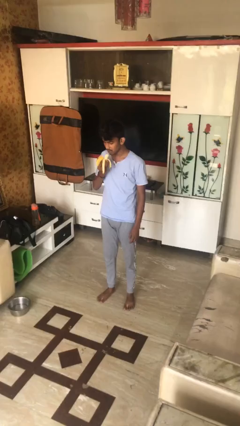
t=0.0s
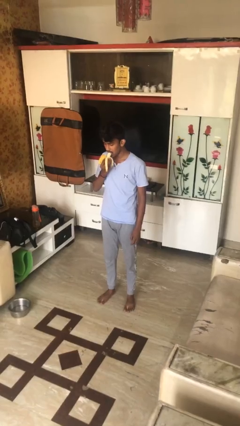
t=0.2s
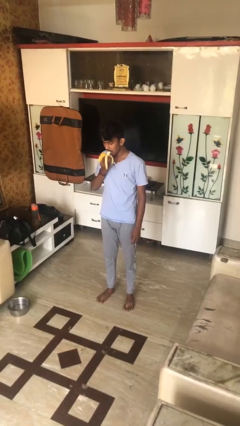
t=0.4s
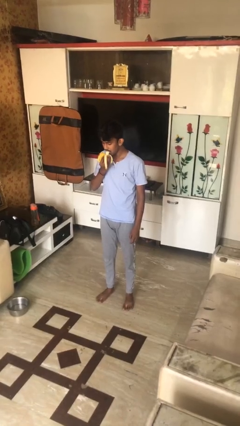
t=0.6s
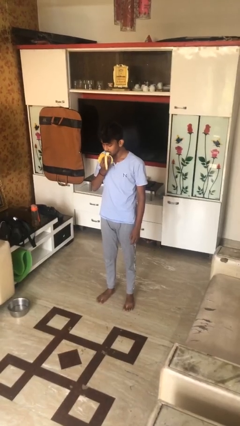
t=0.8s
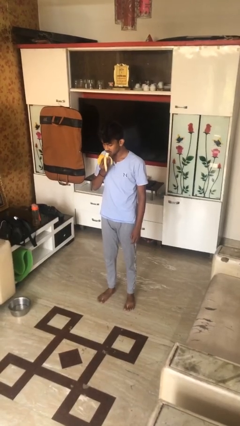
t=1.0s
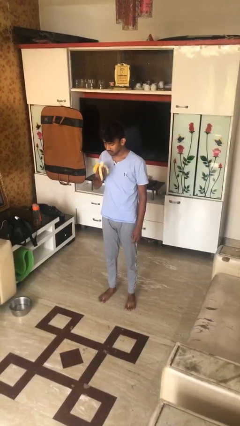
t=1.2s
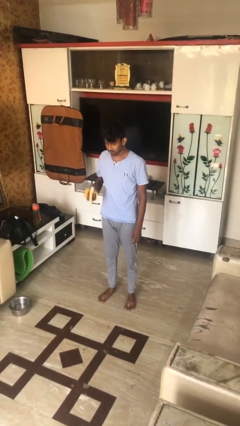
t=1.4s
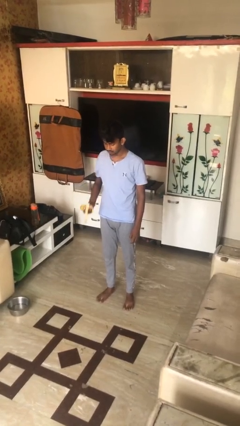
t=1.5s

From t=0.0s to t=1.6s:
person eats banana

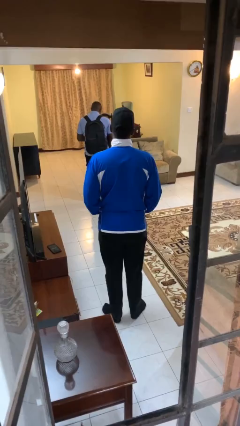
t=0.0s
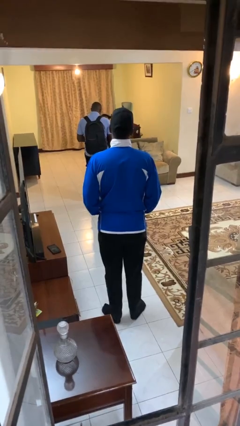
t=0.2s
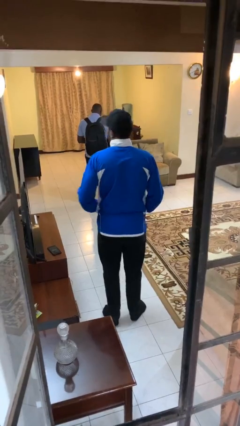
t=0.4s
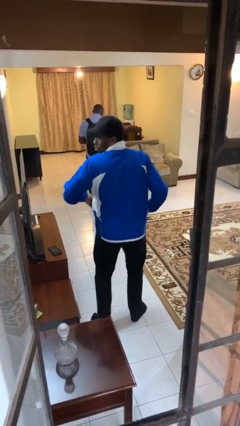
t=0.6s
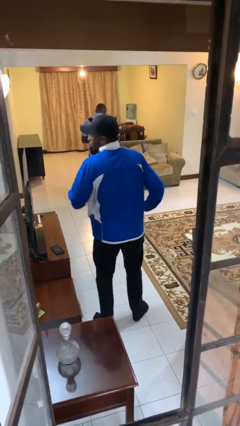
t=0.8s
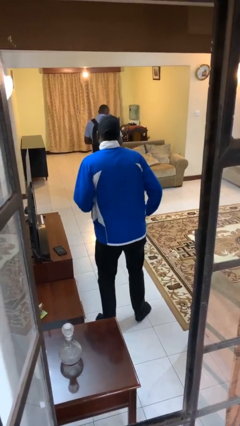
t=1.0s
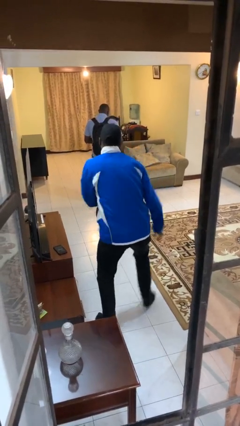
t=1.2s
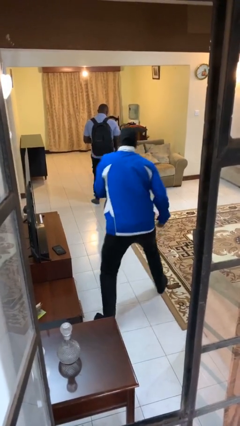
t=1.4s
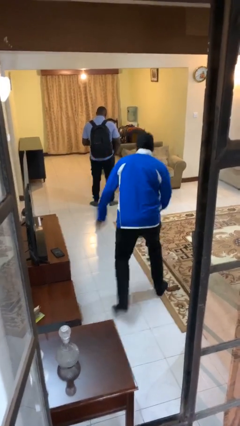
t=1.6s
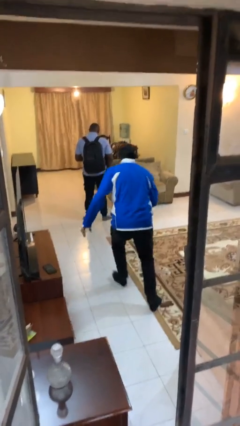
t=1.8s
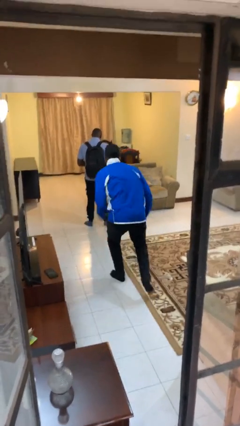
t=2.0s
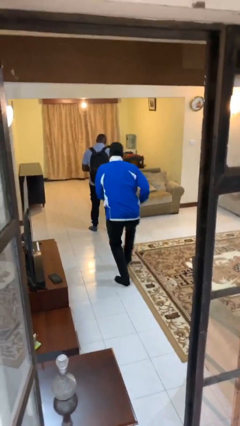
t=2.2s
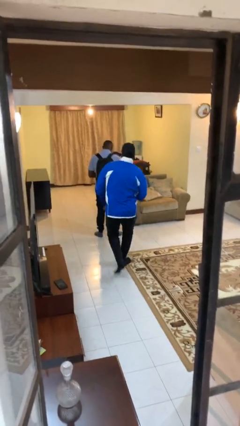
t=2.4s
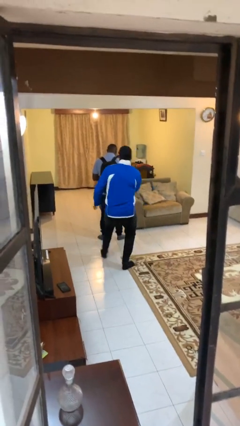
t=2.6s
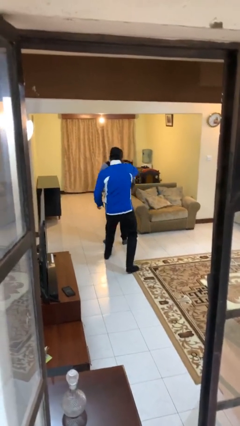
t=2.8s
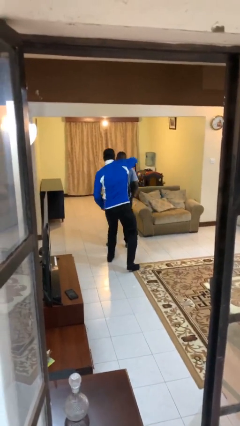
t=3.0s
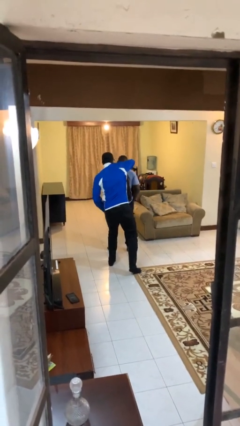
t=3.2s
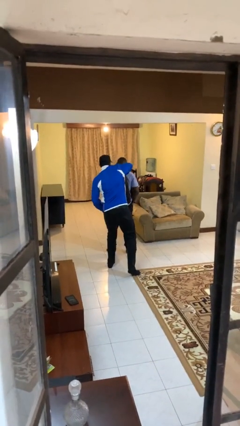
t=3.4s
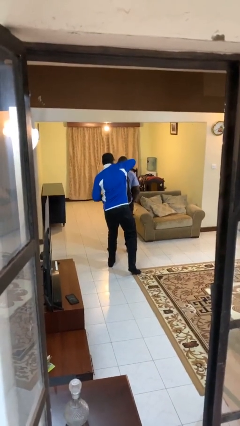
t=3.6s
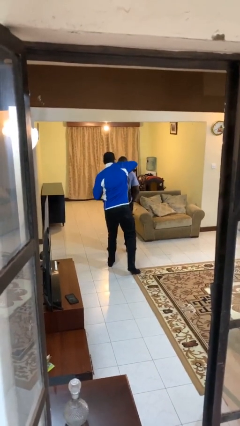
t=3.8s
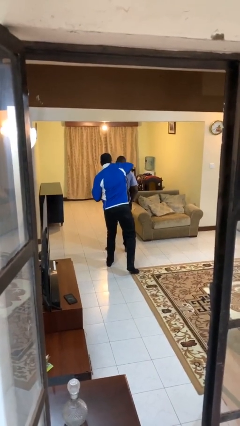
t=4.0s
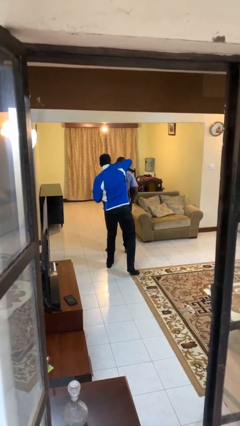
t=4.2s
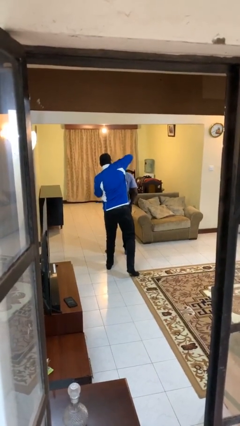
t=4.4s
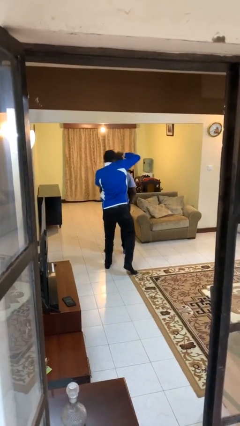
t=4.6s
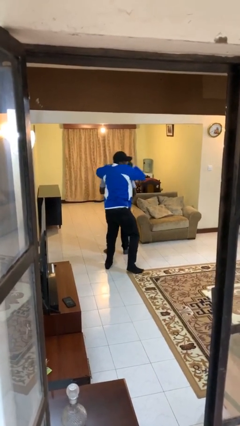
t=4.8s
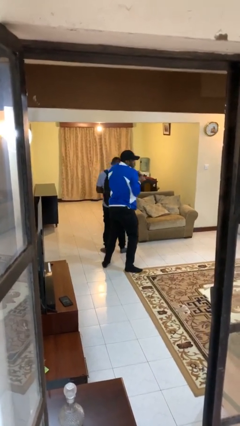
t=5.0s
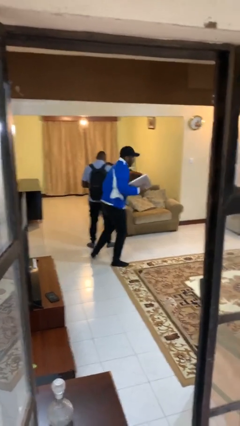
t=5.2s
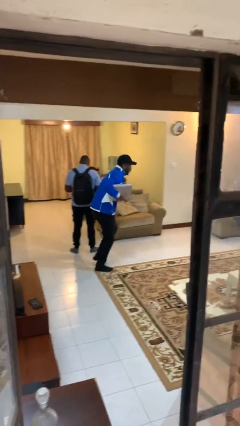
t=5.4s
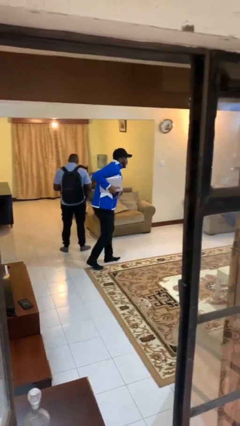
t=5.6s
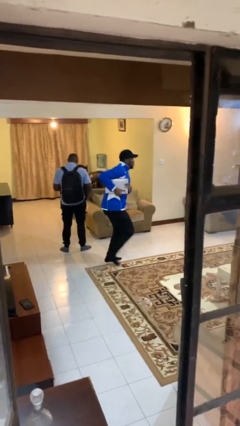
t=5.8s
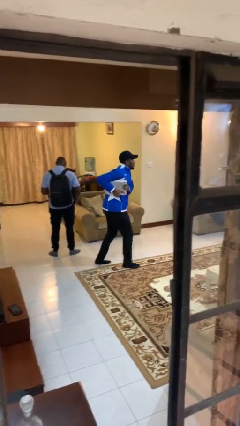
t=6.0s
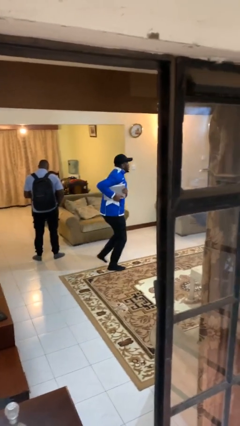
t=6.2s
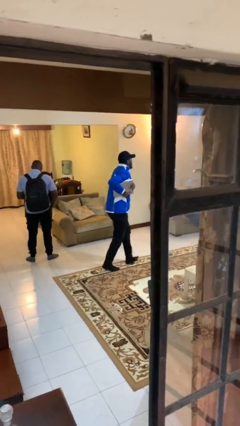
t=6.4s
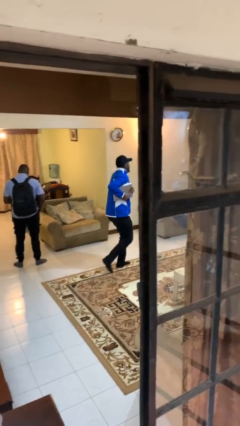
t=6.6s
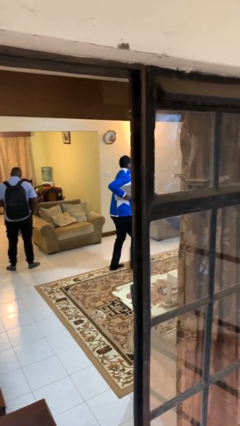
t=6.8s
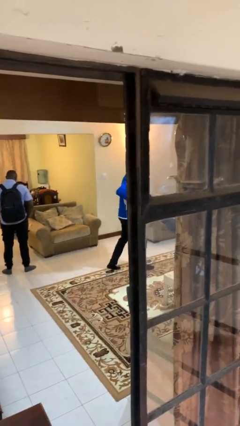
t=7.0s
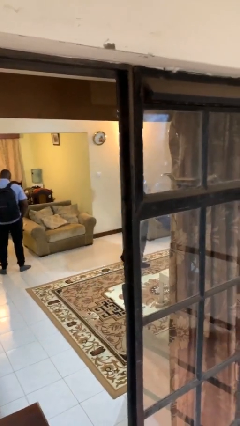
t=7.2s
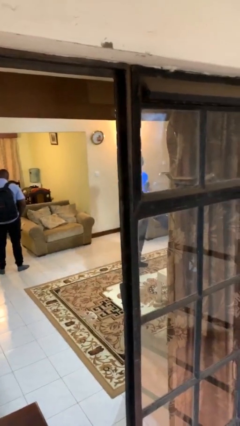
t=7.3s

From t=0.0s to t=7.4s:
person steals object from person

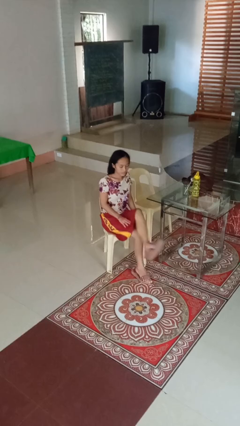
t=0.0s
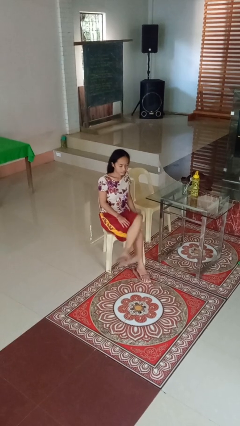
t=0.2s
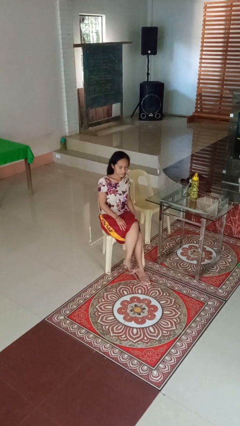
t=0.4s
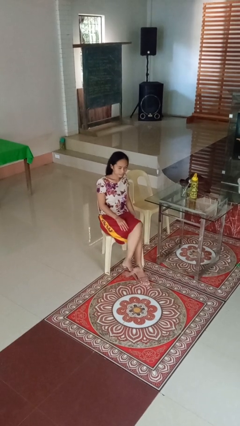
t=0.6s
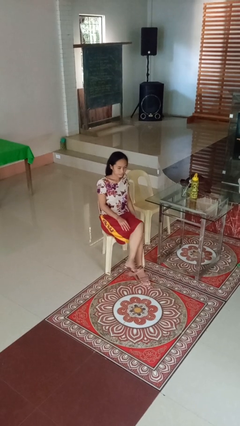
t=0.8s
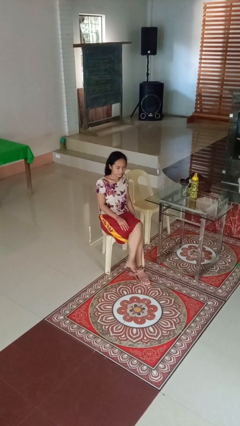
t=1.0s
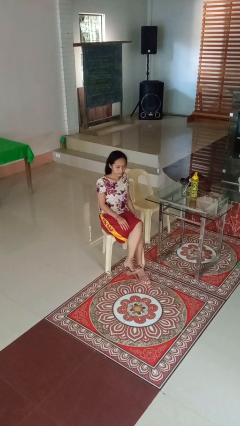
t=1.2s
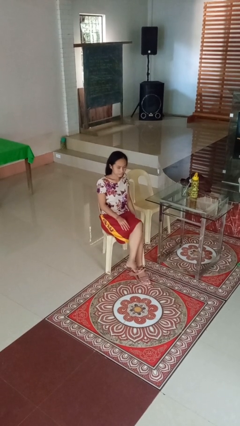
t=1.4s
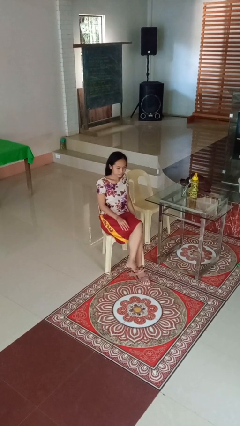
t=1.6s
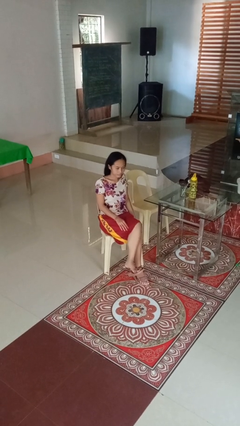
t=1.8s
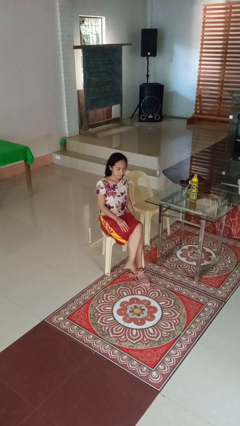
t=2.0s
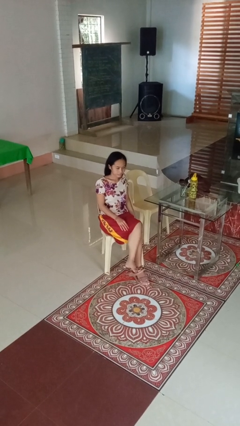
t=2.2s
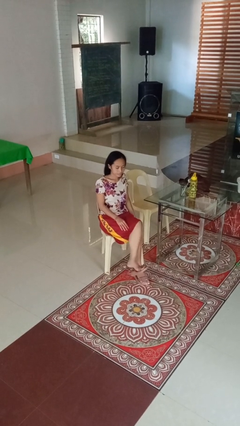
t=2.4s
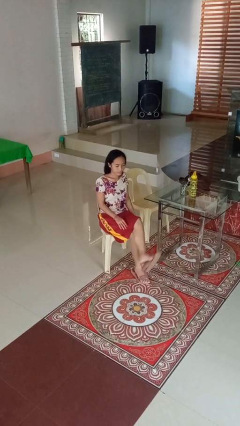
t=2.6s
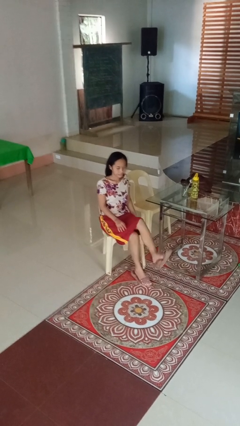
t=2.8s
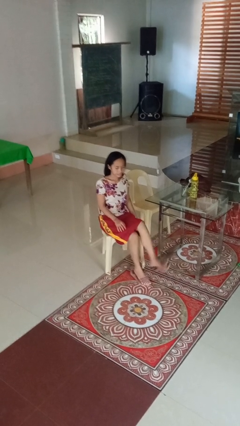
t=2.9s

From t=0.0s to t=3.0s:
person crosses legs

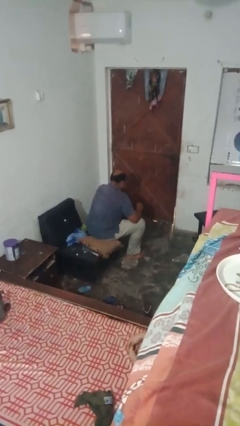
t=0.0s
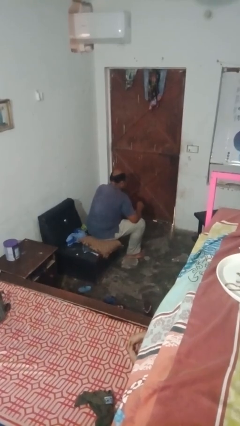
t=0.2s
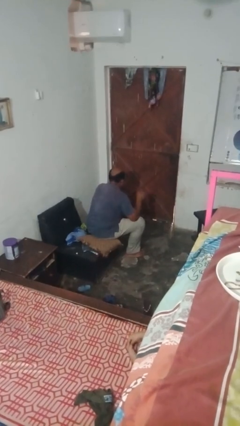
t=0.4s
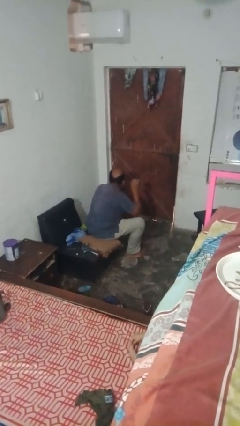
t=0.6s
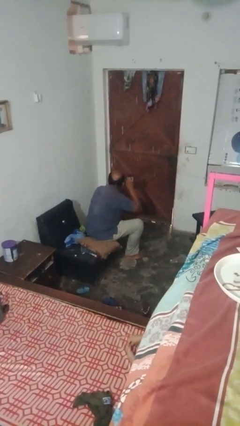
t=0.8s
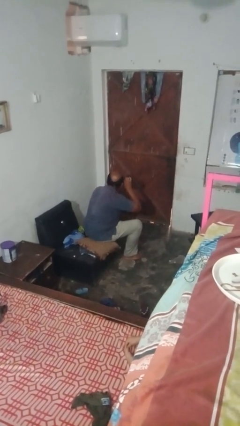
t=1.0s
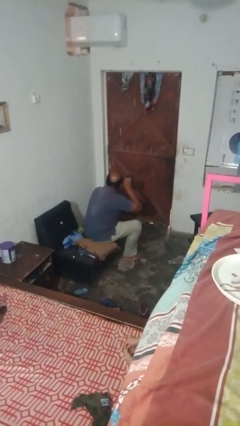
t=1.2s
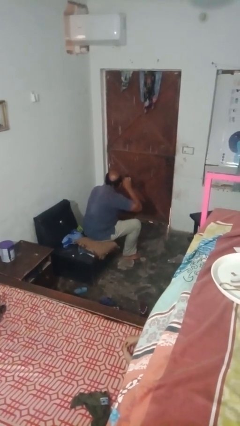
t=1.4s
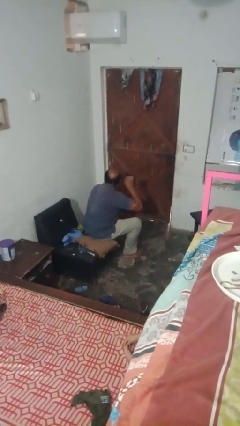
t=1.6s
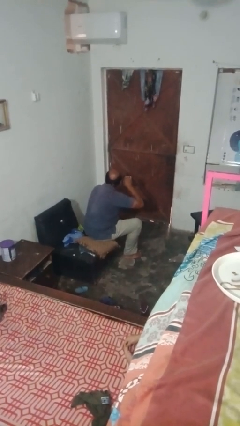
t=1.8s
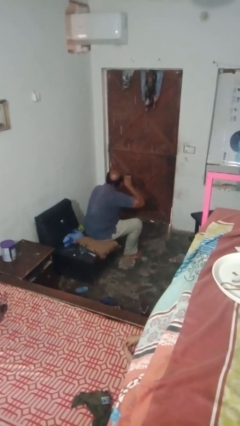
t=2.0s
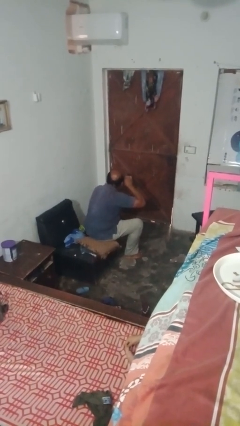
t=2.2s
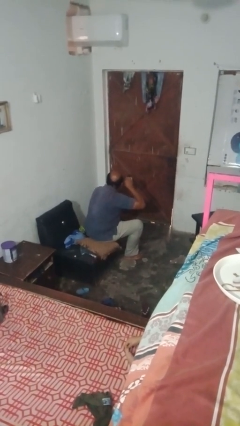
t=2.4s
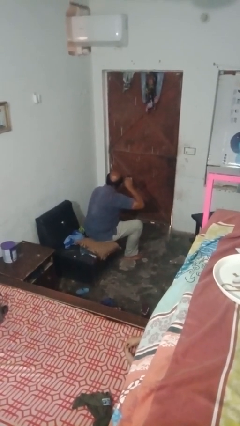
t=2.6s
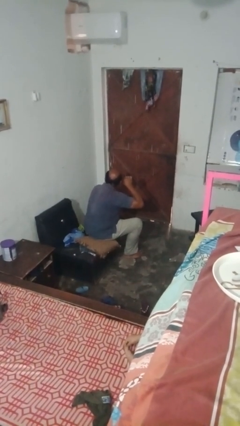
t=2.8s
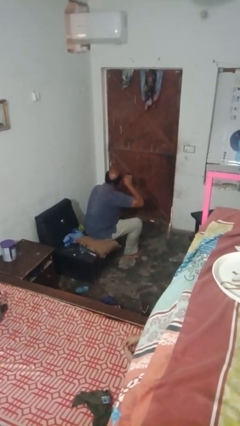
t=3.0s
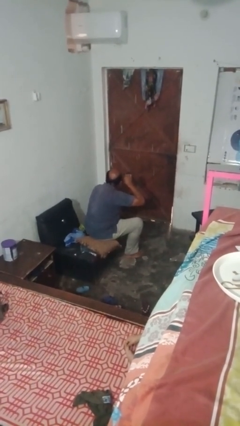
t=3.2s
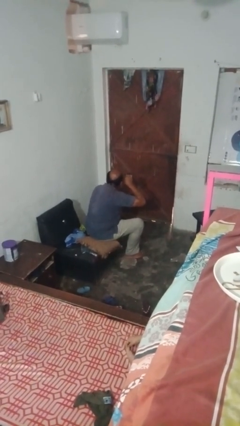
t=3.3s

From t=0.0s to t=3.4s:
person applies eye makeup

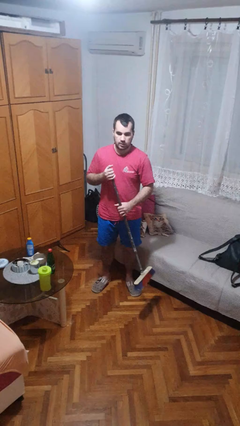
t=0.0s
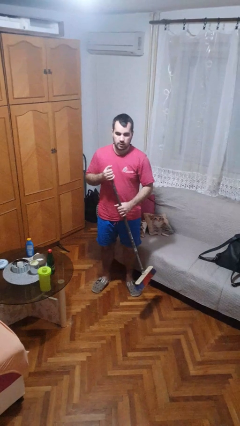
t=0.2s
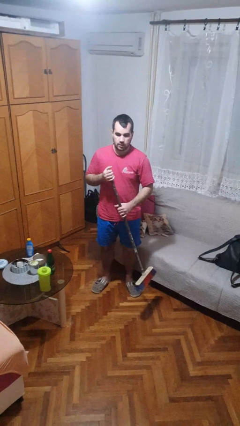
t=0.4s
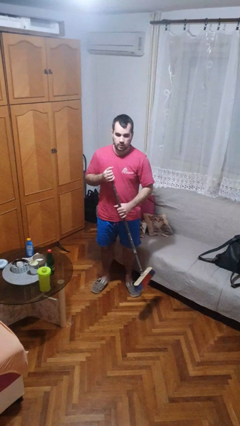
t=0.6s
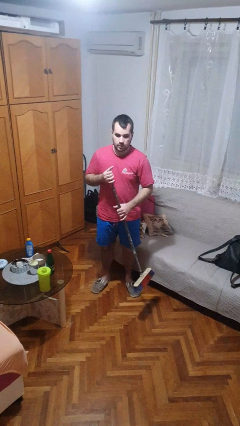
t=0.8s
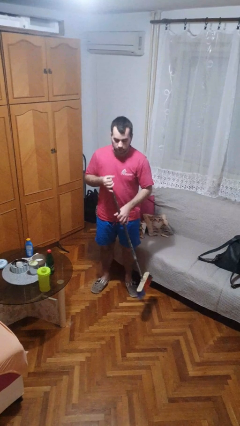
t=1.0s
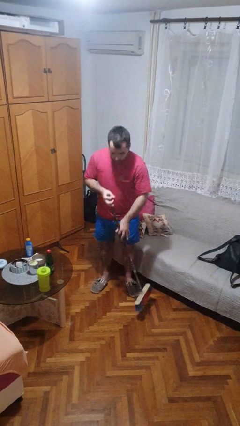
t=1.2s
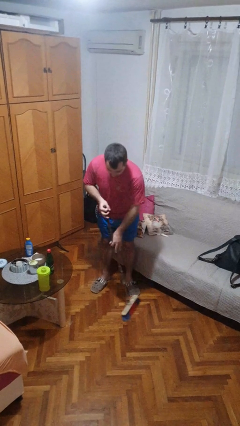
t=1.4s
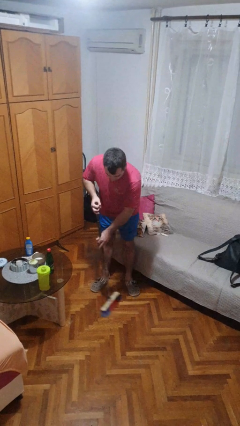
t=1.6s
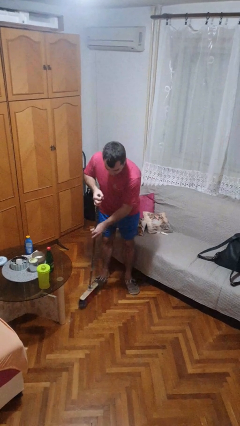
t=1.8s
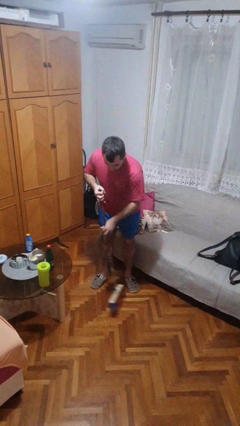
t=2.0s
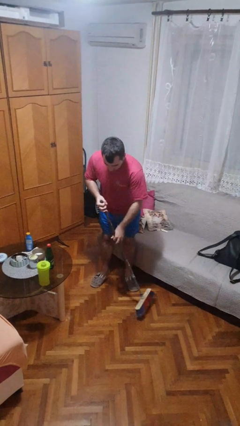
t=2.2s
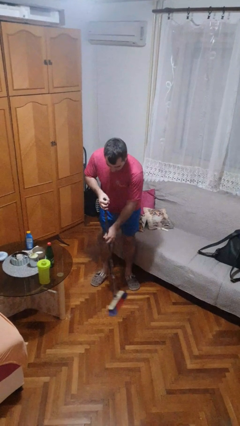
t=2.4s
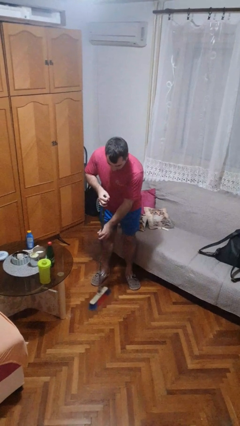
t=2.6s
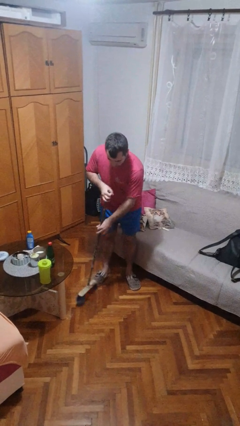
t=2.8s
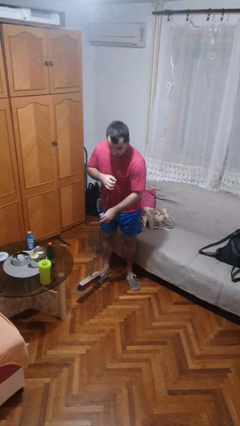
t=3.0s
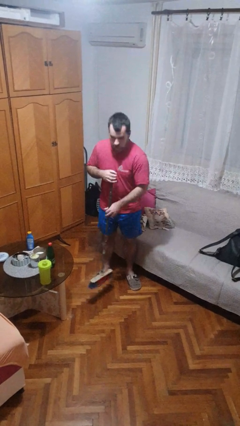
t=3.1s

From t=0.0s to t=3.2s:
person sweeps floor
